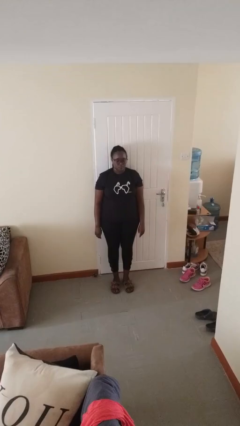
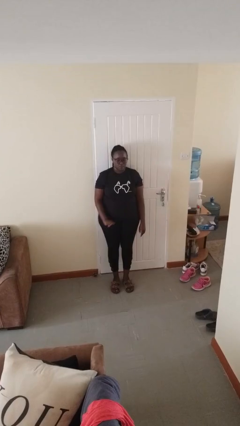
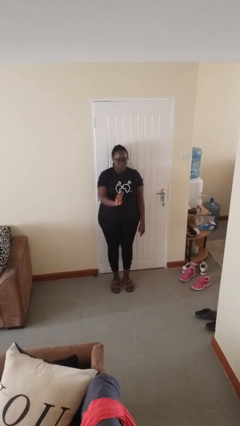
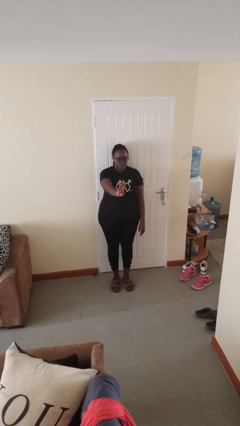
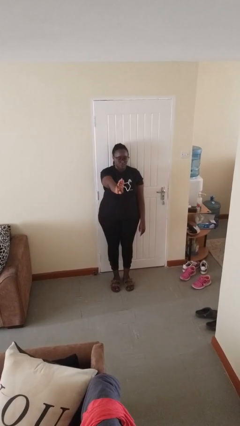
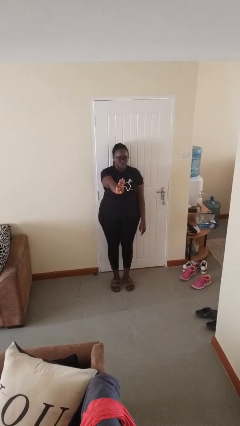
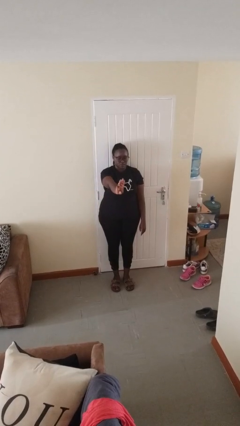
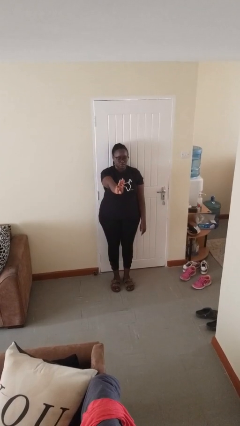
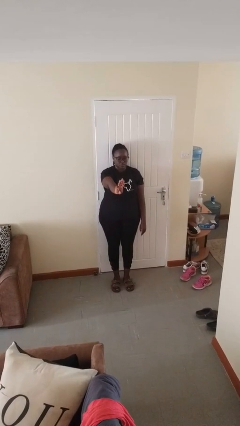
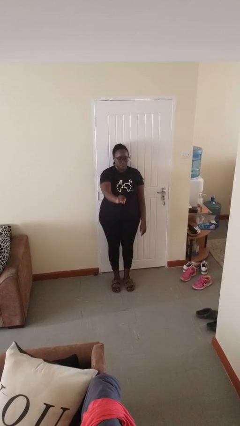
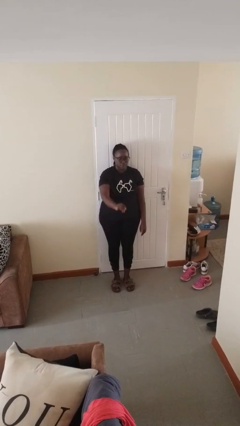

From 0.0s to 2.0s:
person gestures number three

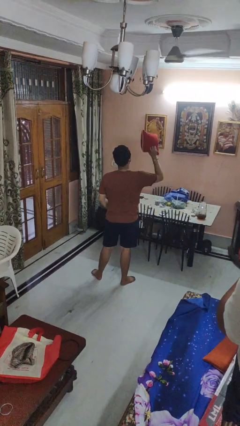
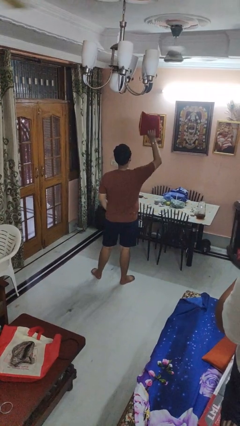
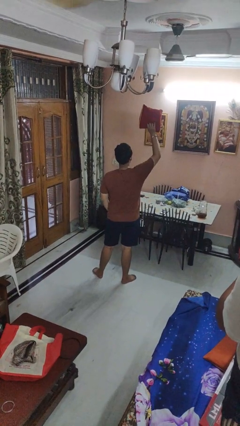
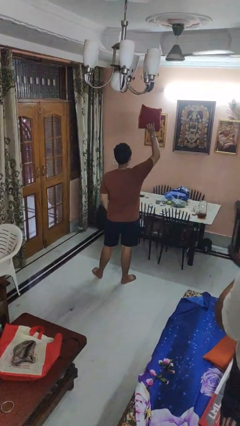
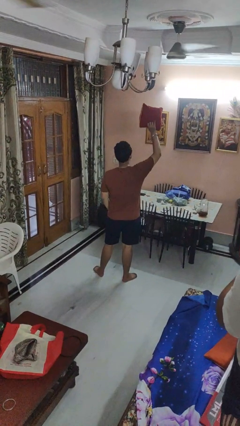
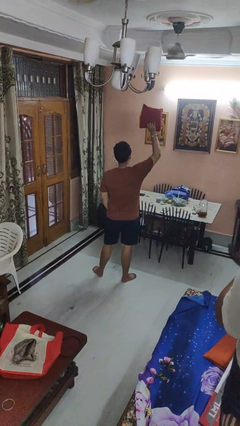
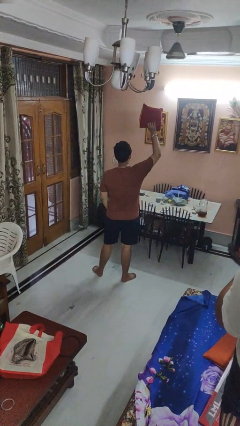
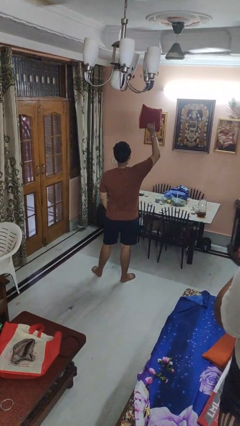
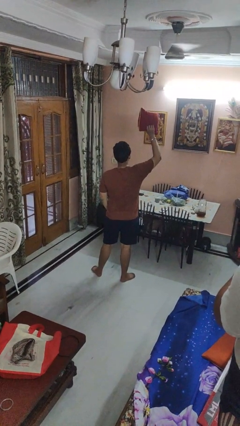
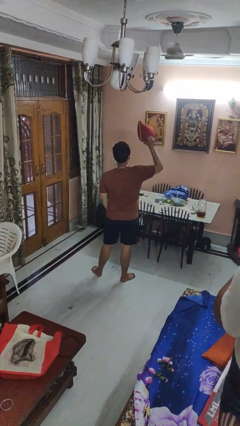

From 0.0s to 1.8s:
person holds object above head

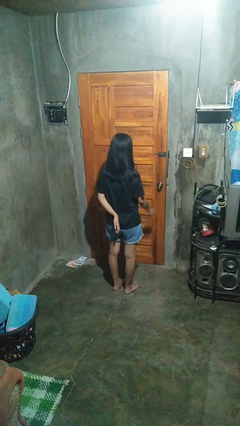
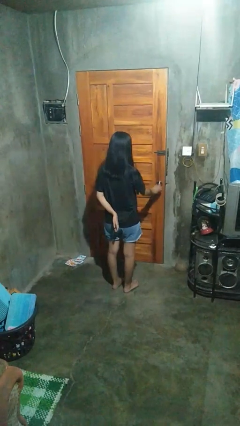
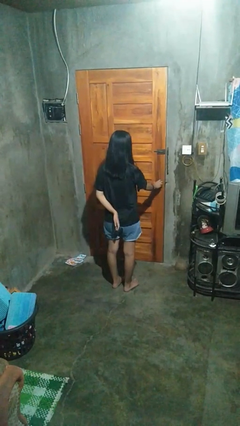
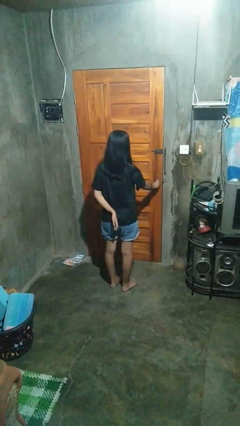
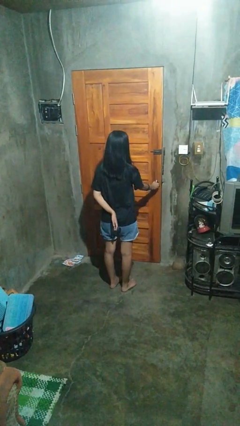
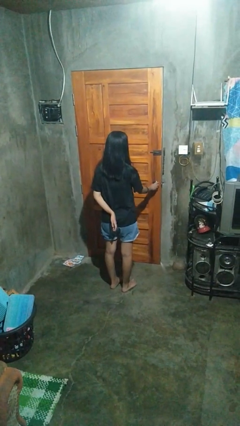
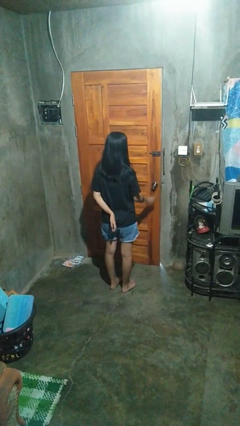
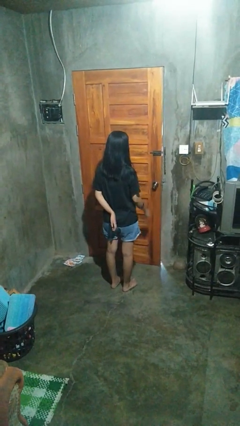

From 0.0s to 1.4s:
person opens facility door

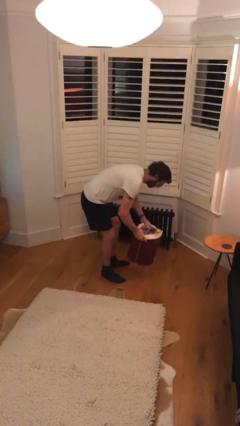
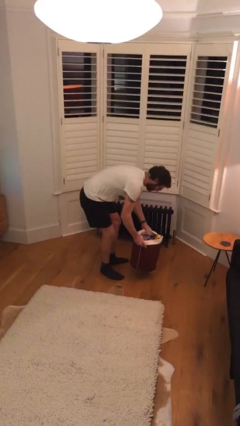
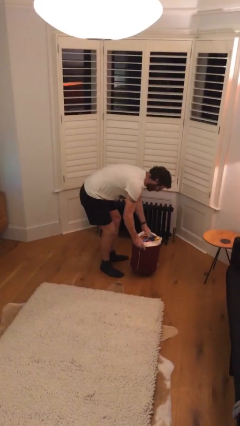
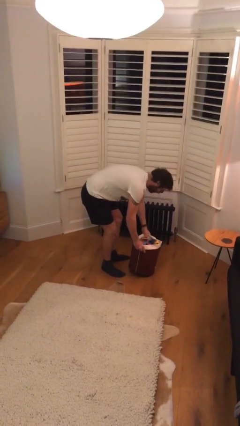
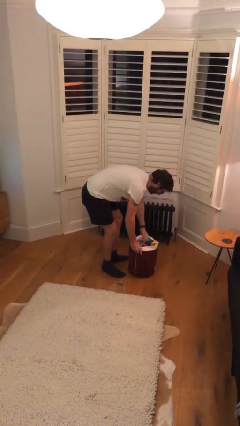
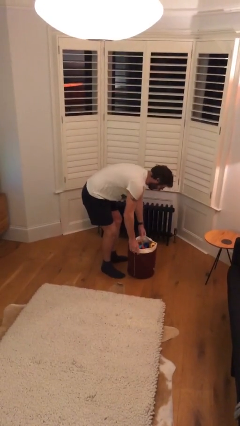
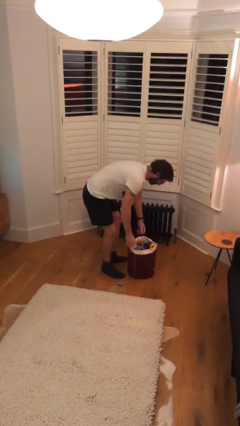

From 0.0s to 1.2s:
person puts down object on floor

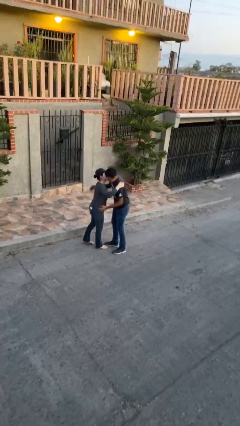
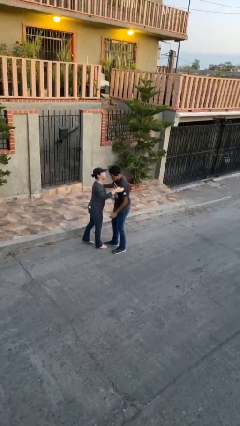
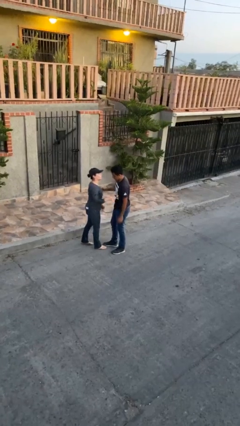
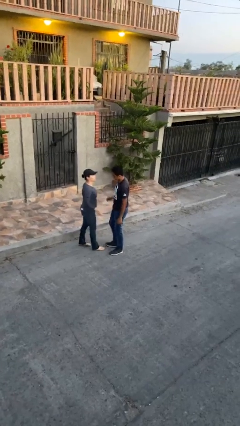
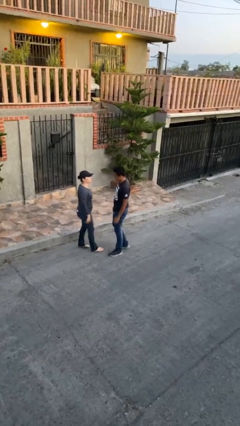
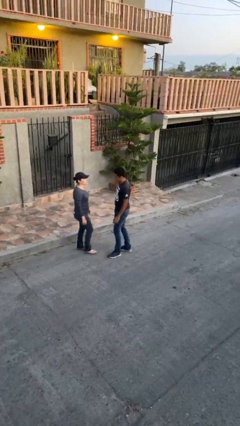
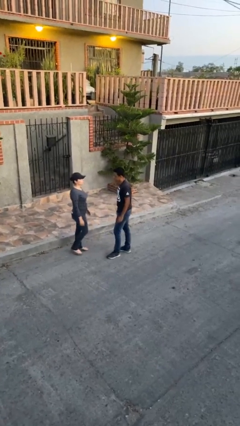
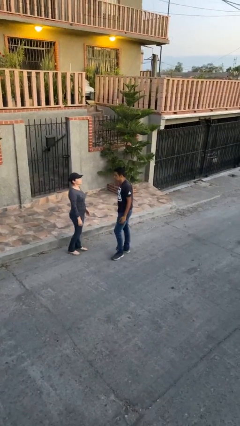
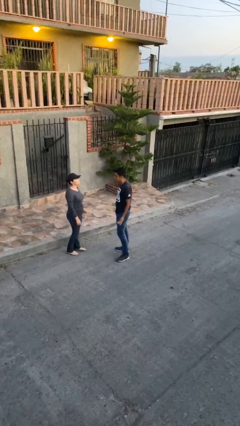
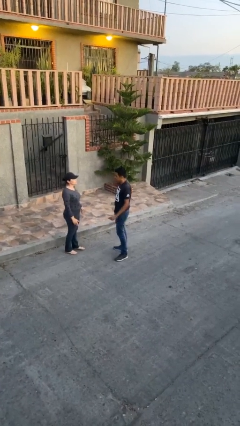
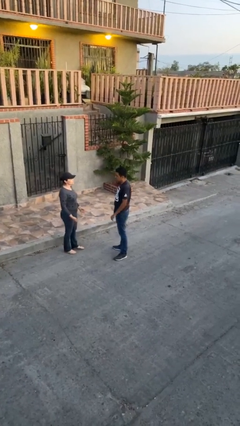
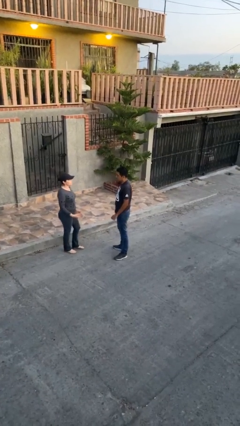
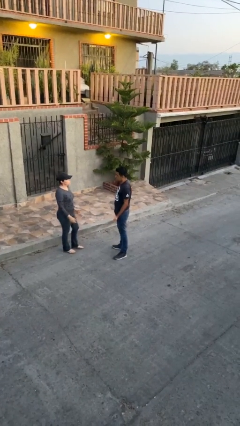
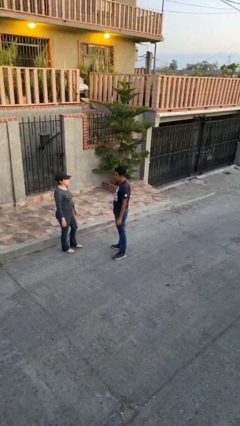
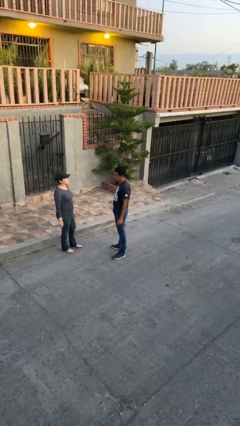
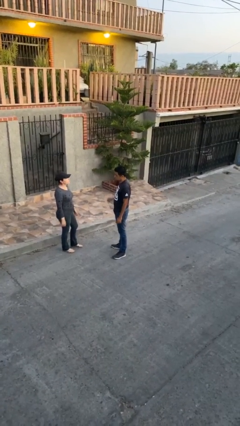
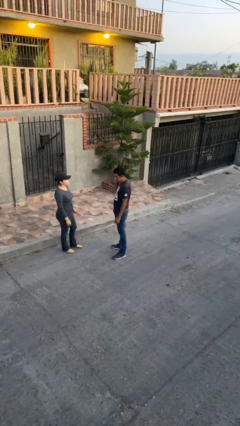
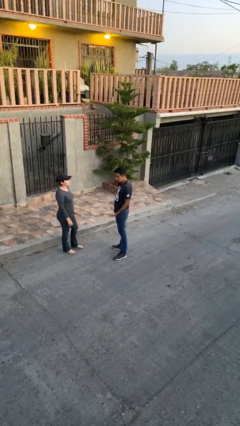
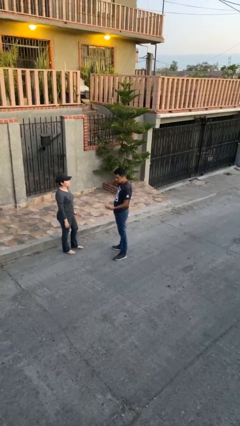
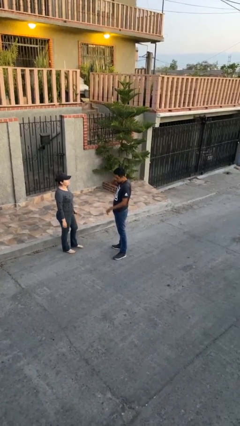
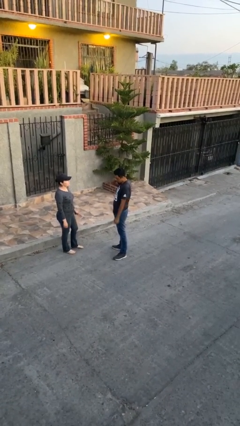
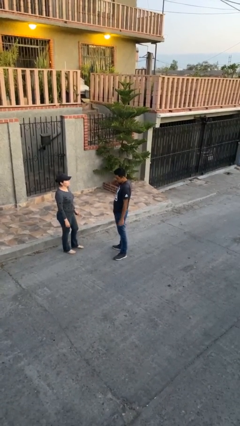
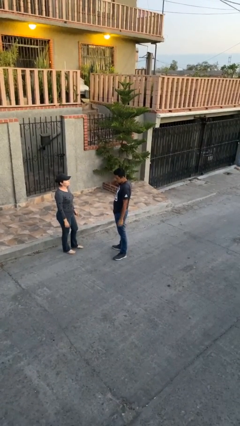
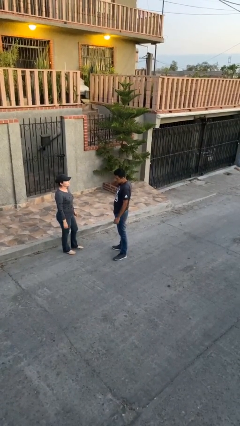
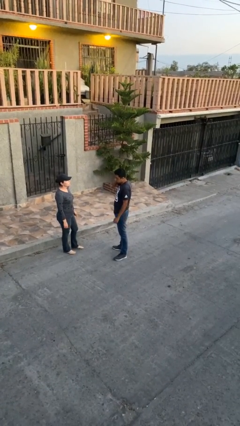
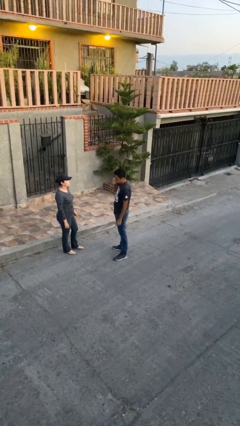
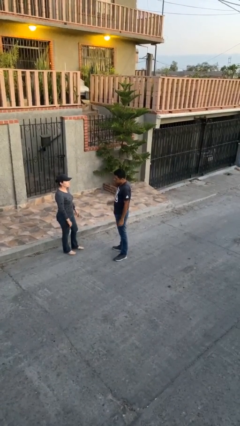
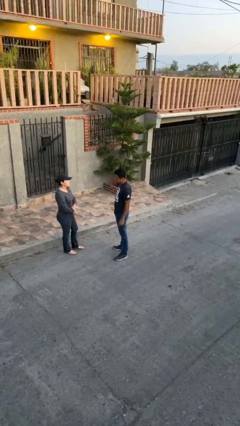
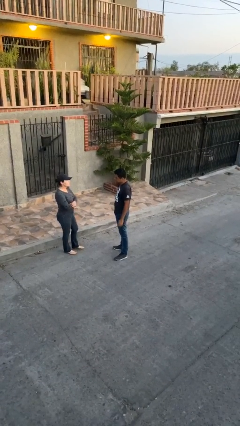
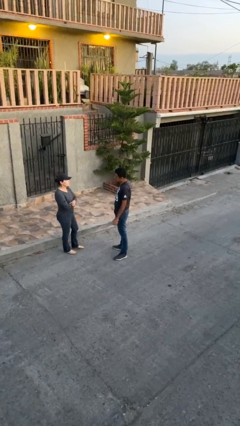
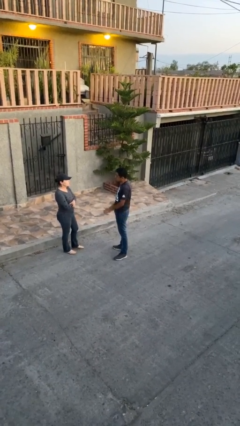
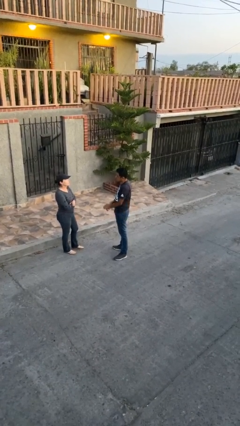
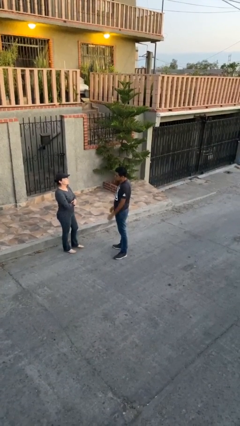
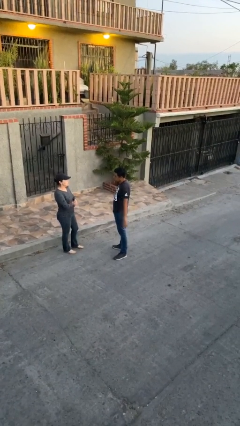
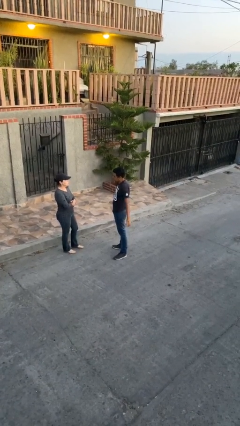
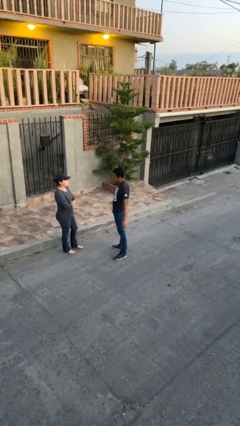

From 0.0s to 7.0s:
person talks to person

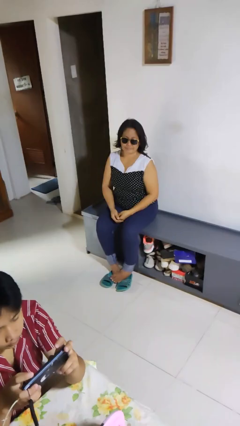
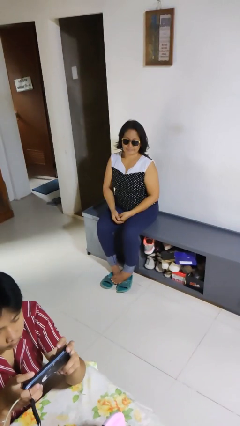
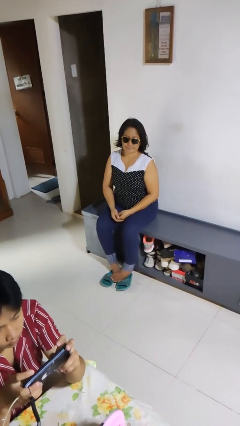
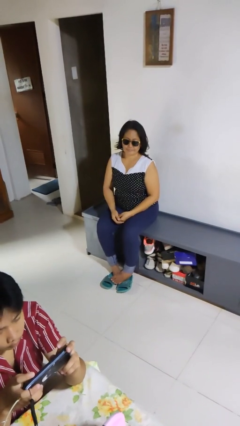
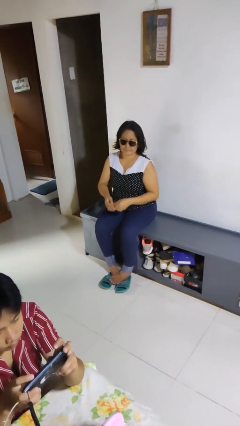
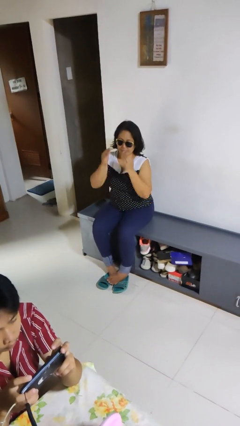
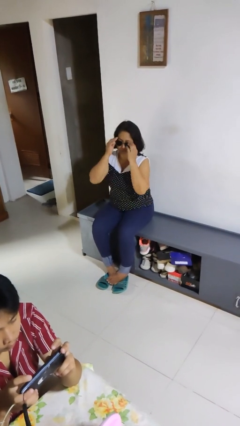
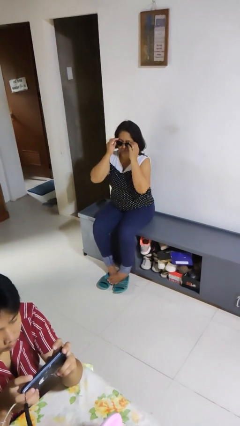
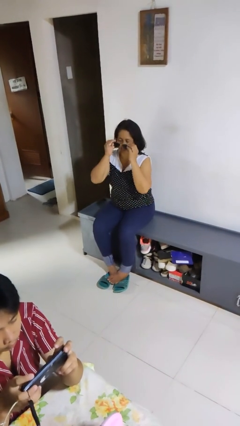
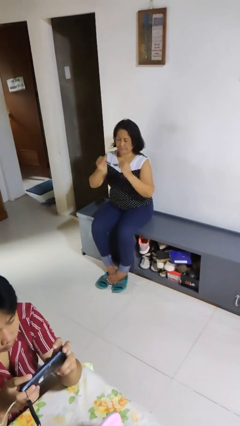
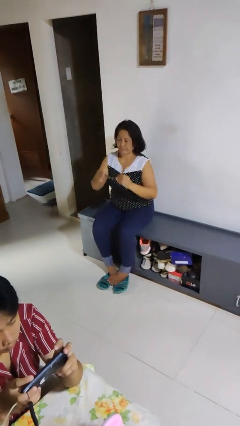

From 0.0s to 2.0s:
person takes off sunglasses

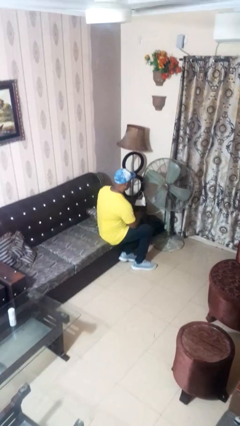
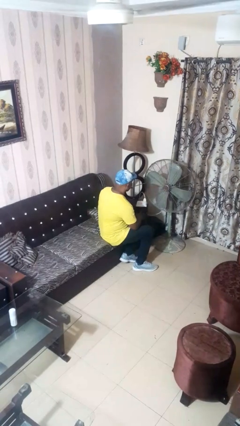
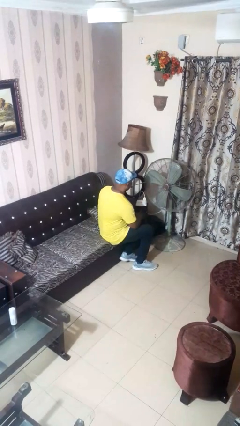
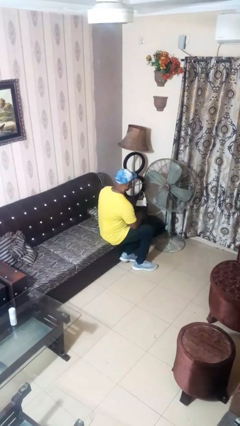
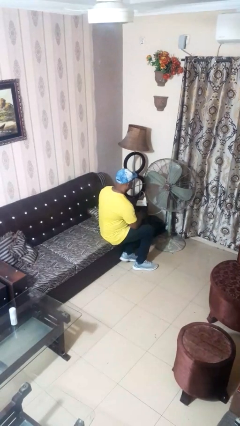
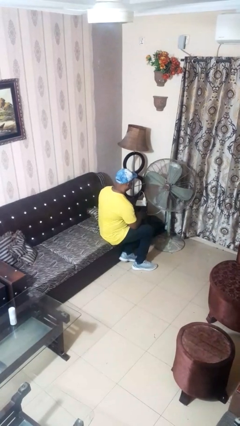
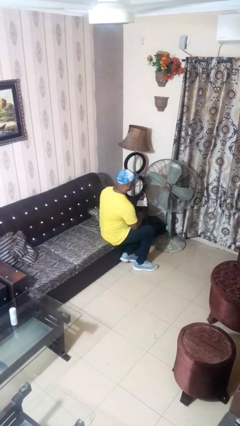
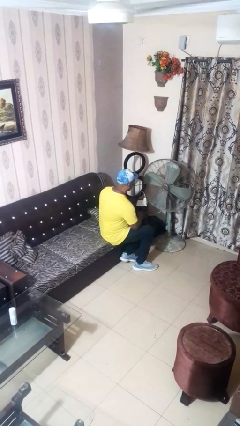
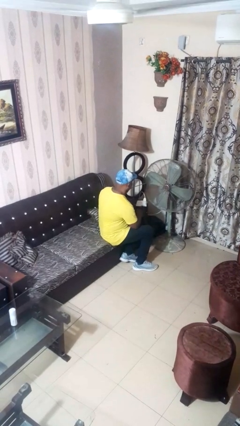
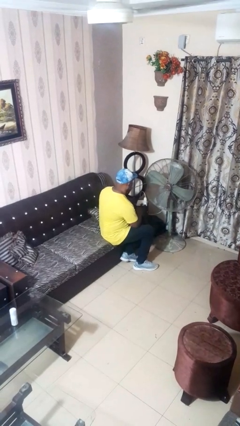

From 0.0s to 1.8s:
person turns off fan

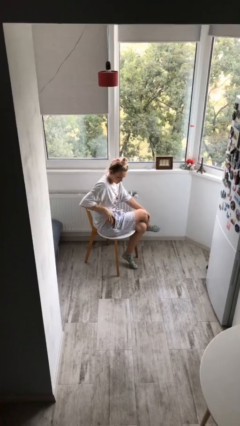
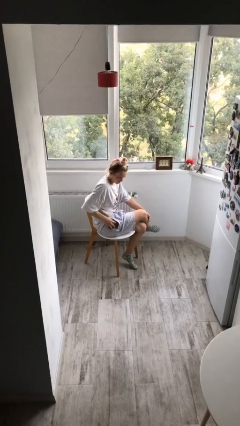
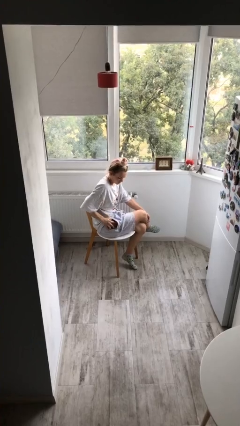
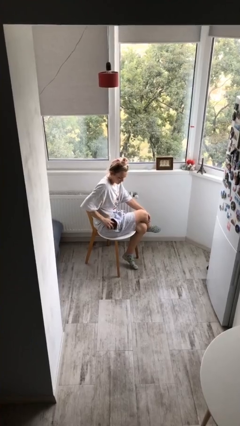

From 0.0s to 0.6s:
person puts phone into pocket
